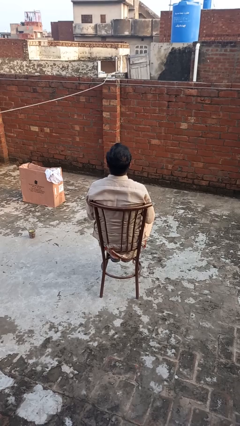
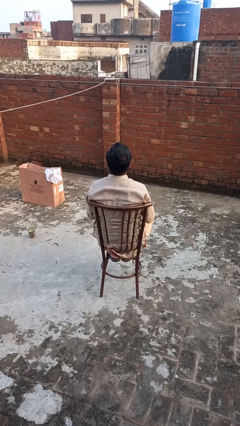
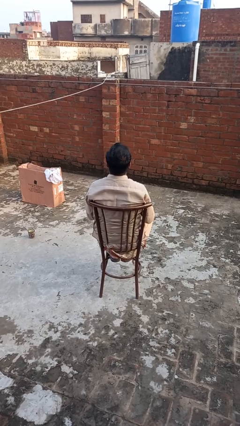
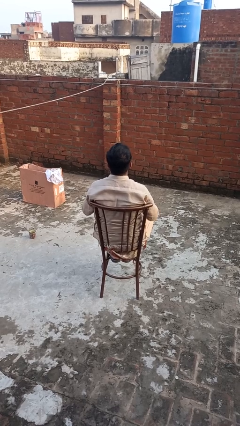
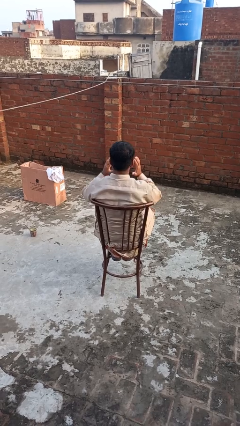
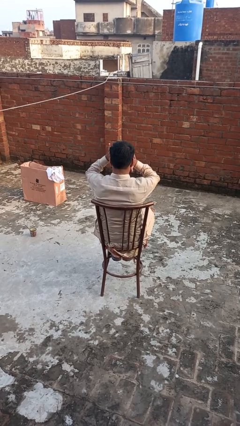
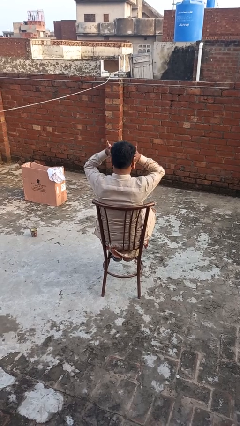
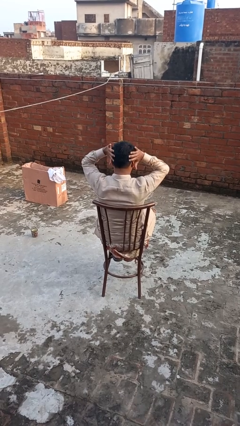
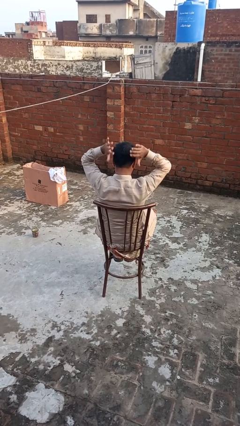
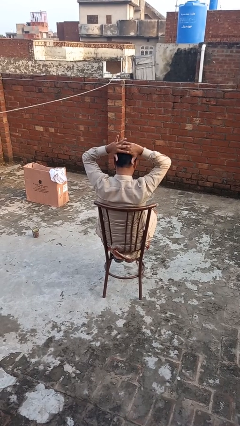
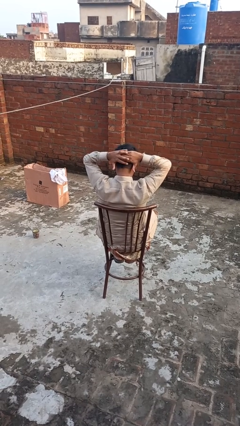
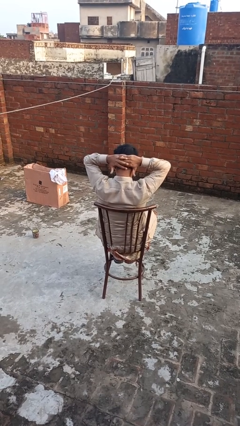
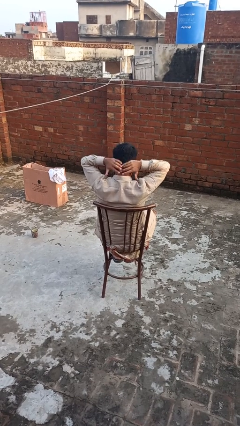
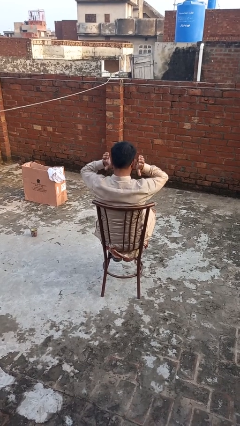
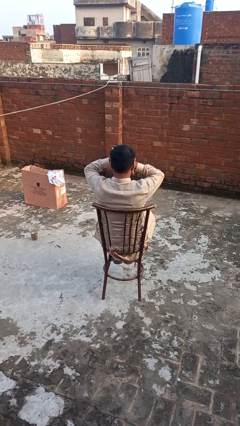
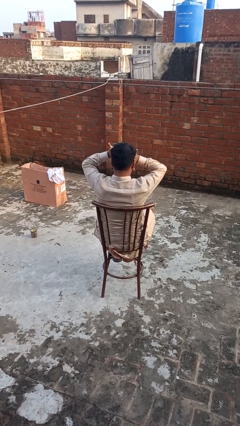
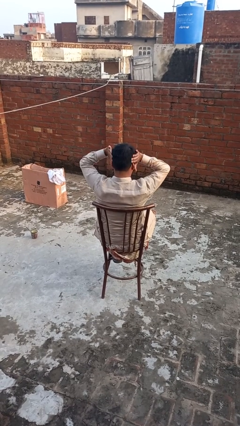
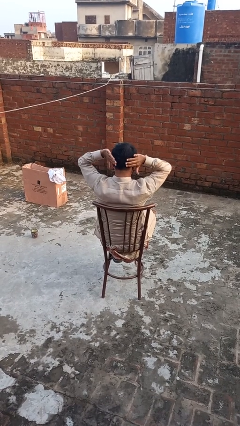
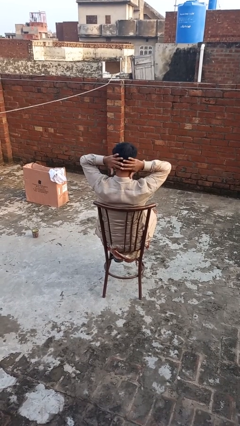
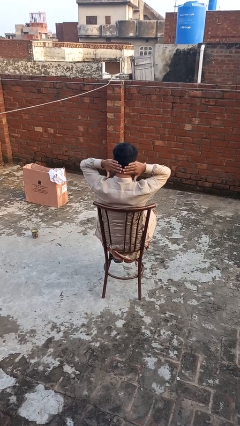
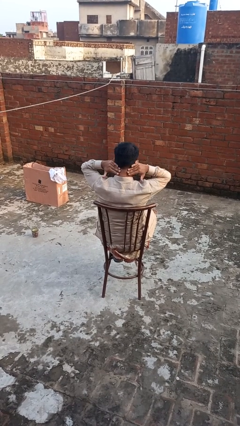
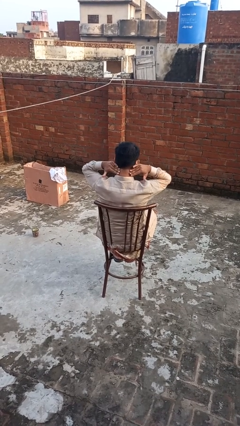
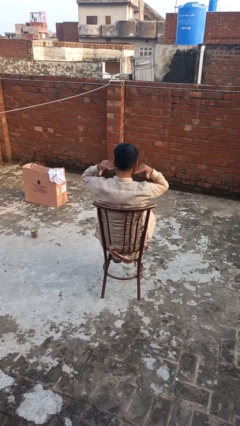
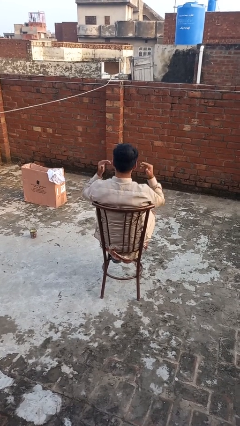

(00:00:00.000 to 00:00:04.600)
person strokes hair

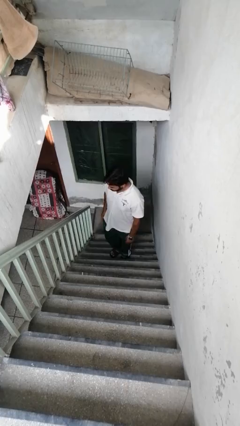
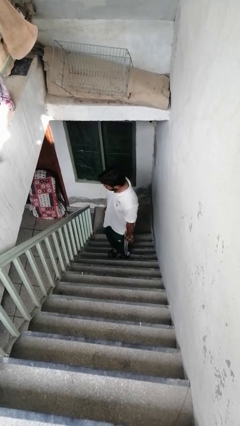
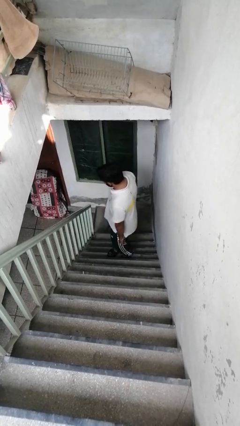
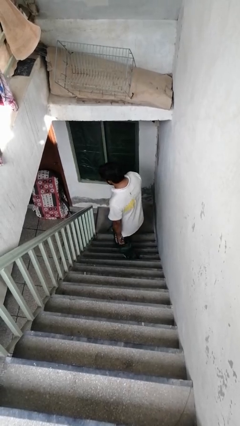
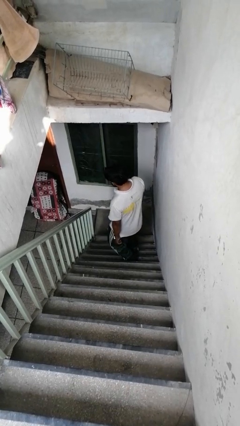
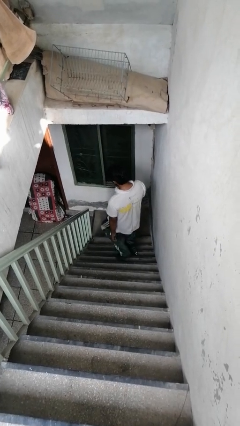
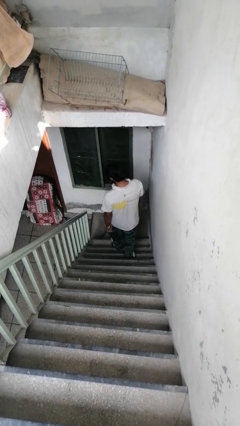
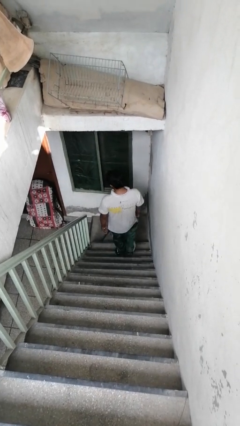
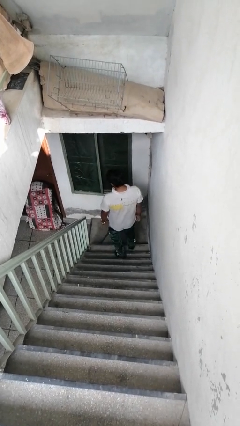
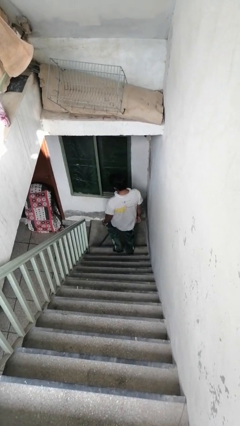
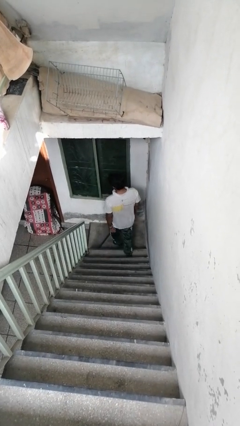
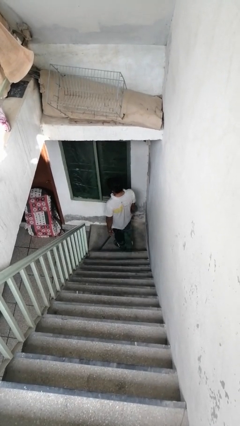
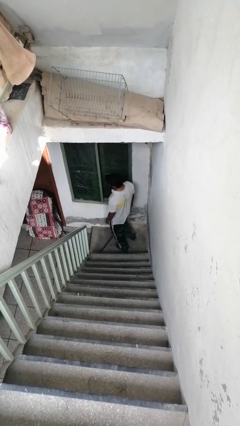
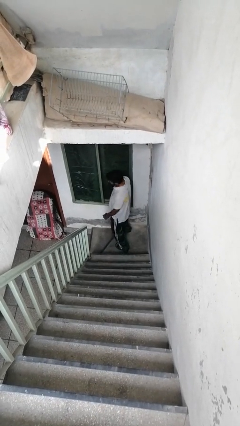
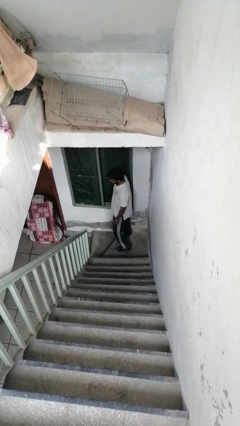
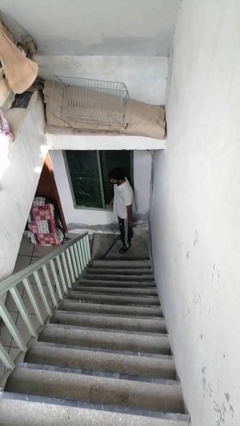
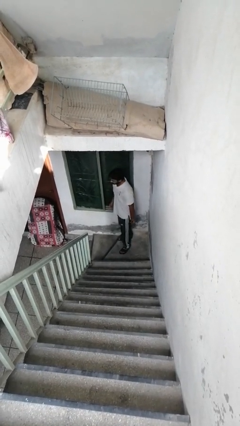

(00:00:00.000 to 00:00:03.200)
person climbs down stairs

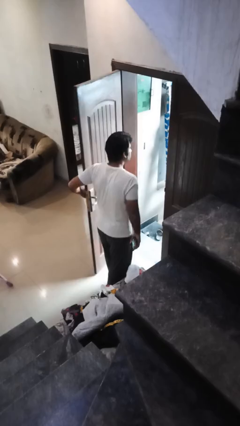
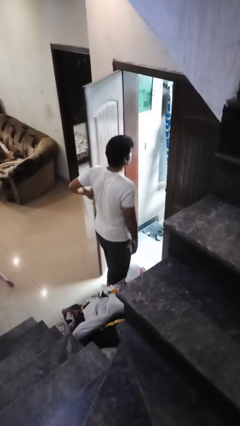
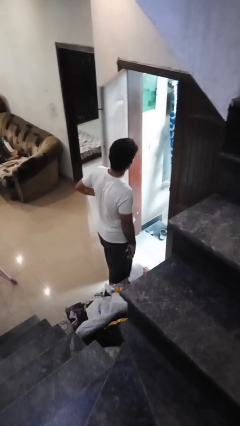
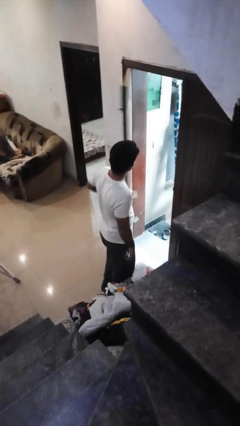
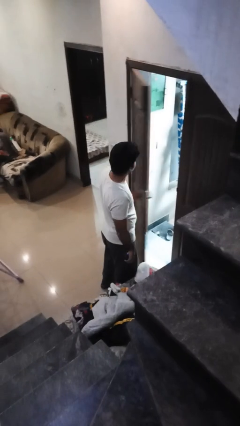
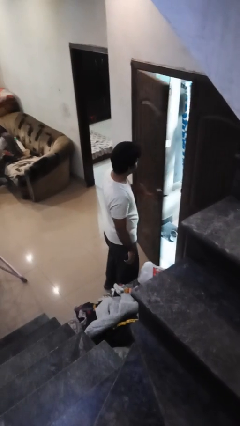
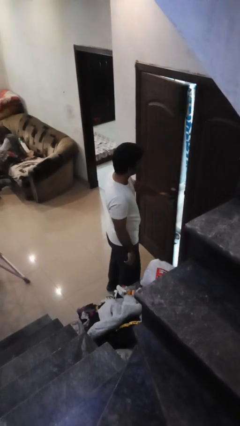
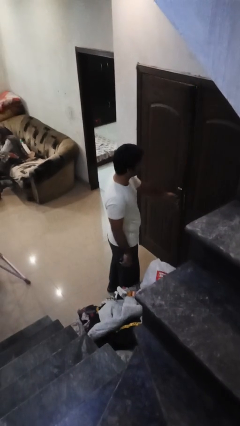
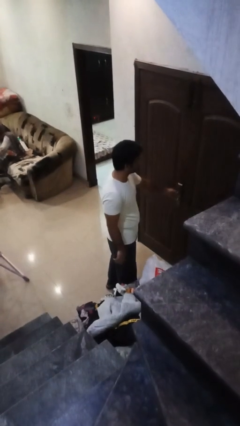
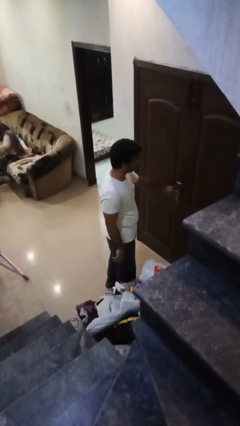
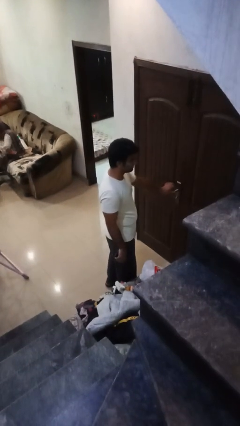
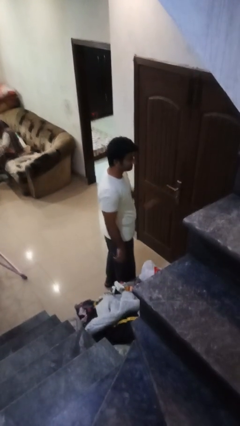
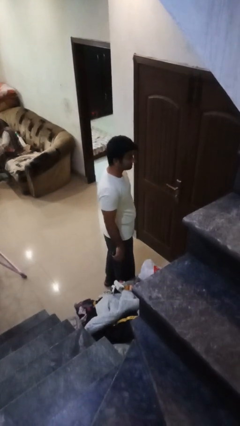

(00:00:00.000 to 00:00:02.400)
person closes facility door

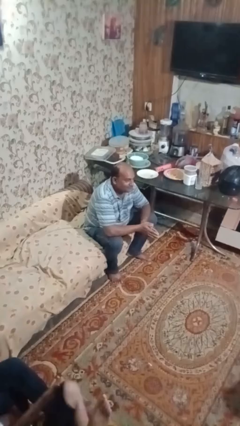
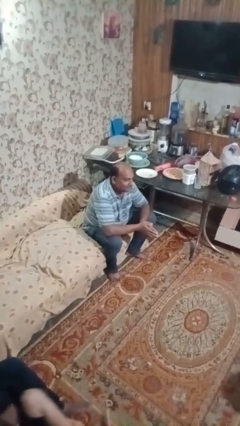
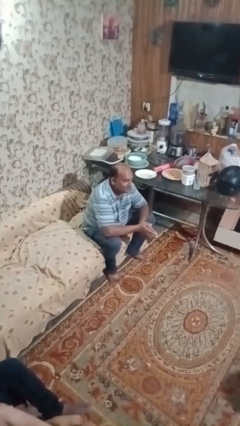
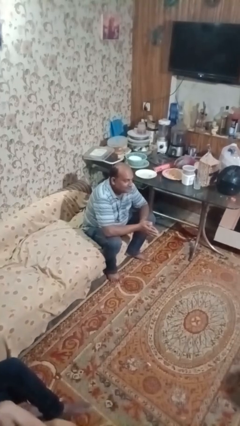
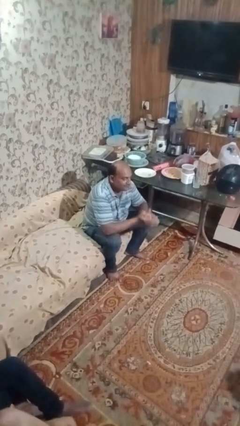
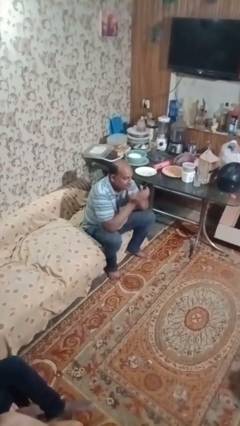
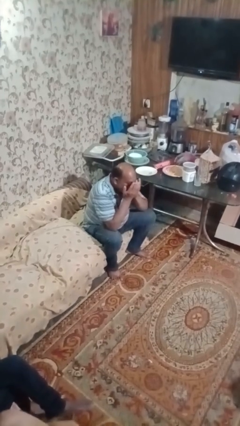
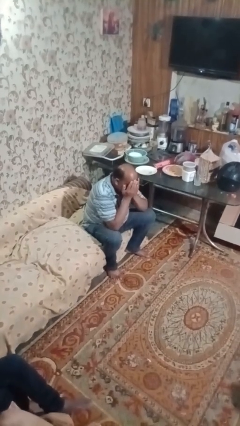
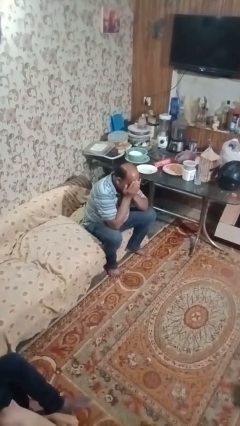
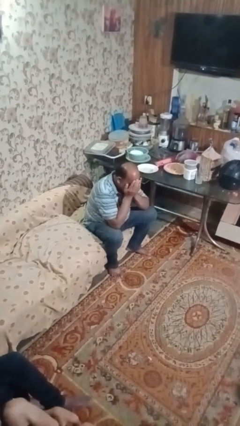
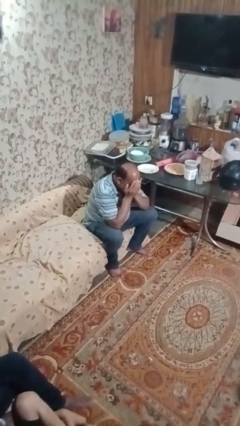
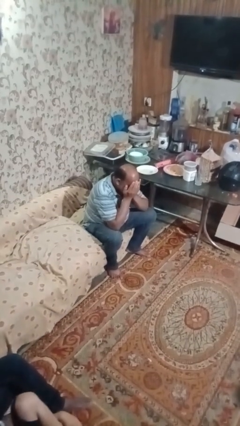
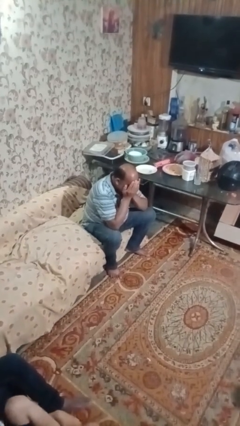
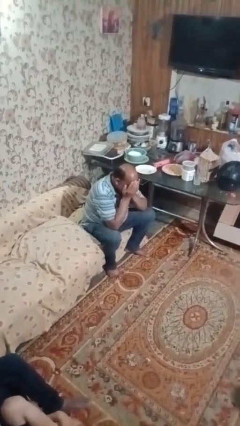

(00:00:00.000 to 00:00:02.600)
person covers face with hands

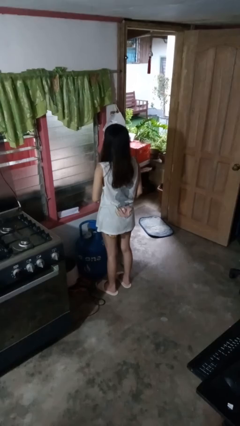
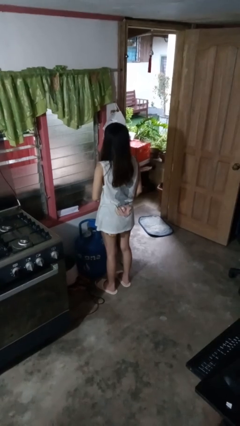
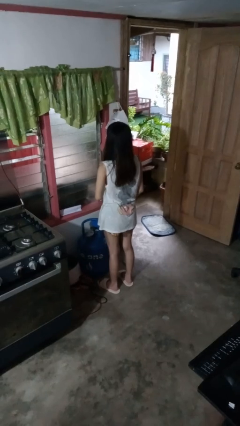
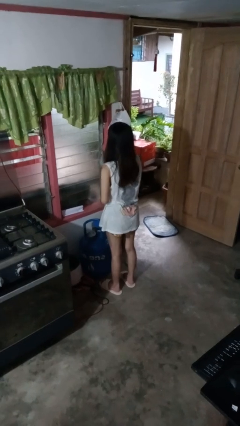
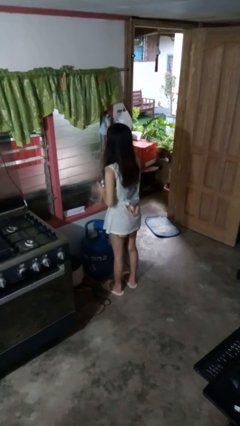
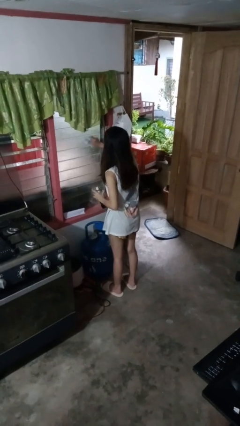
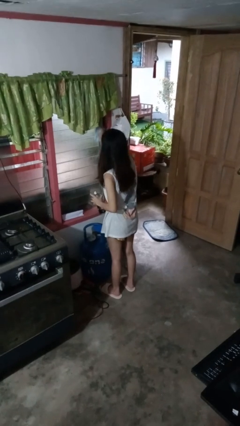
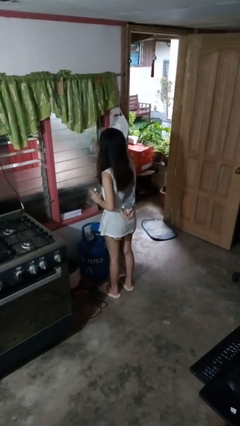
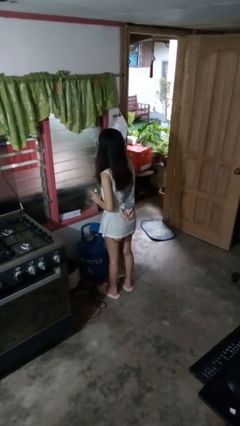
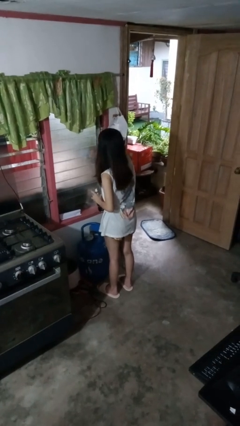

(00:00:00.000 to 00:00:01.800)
person washes window

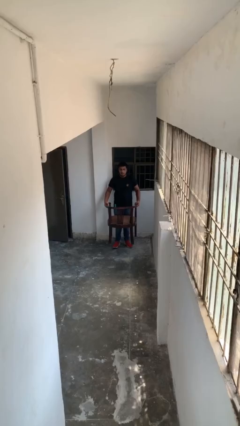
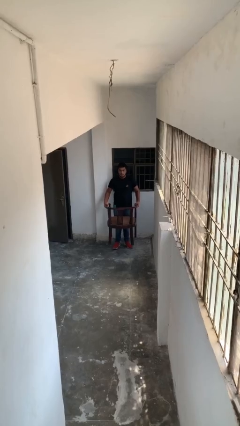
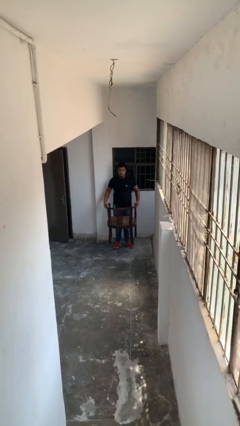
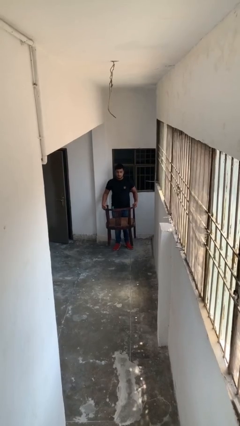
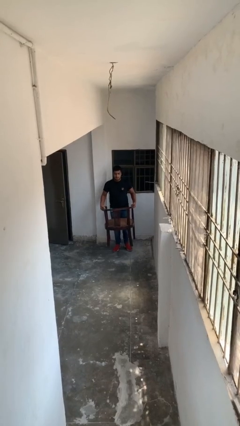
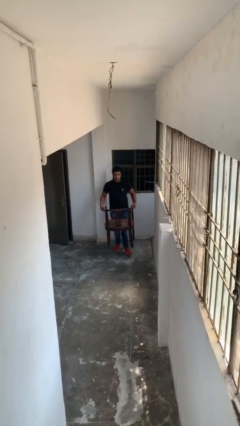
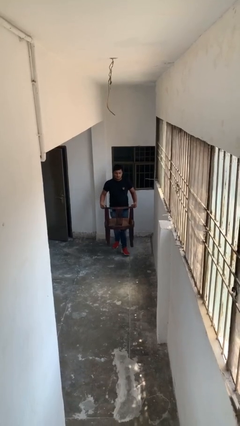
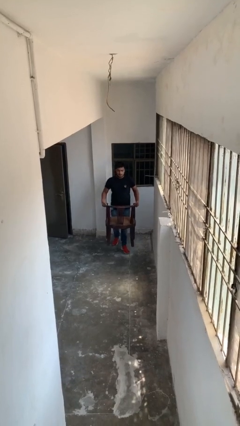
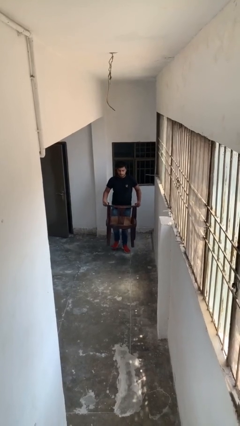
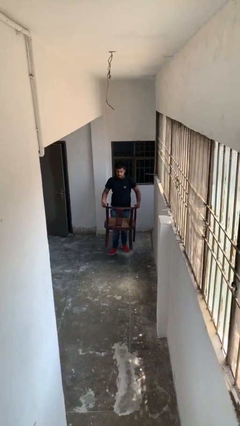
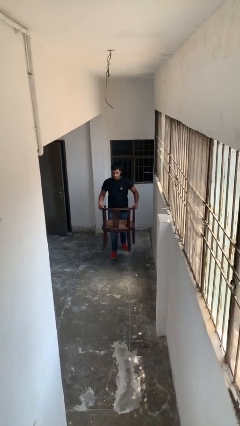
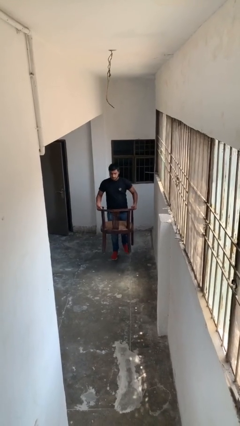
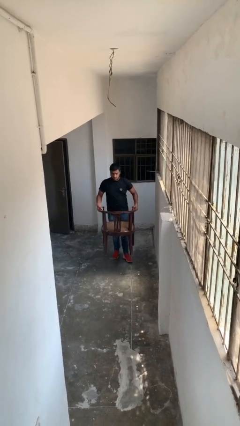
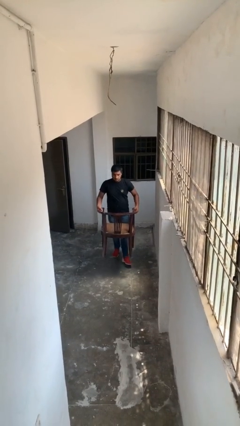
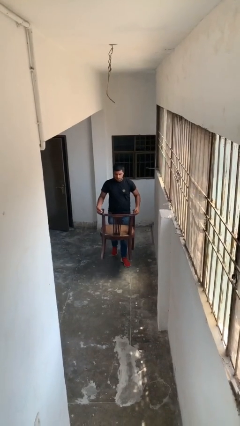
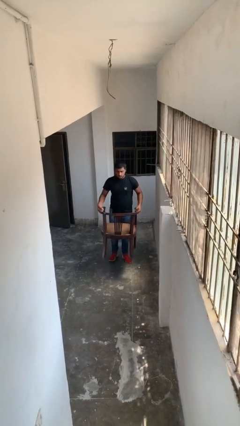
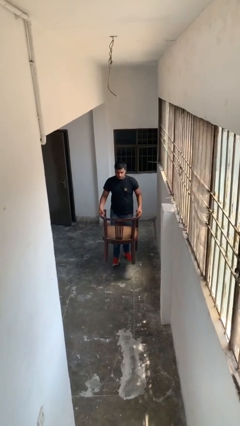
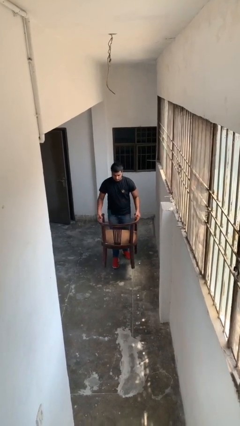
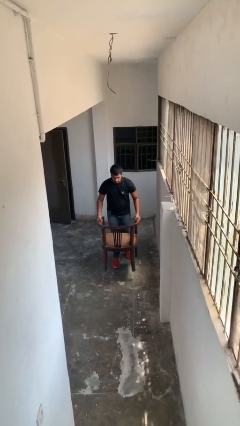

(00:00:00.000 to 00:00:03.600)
person carries heavy object
